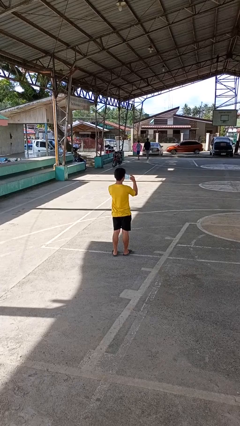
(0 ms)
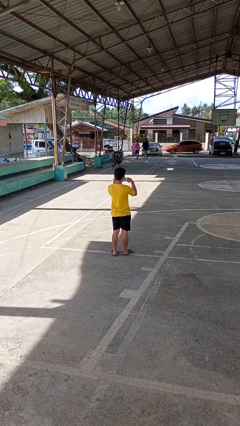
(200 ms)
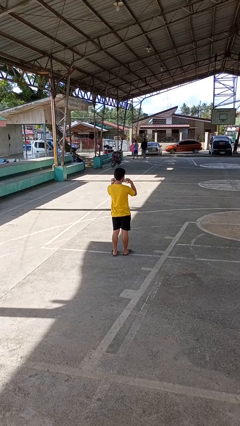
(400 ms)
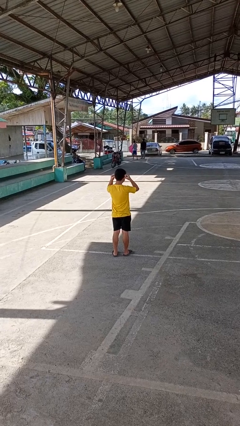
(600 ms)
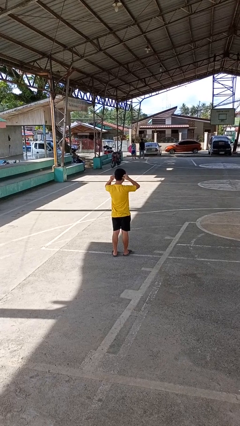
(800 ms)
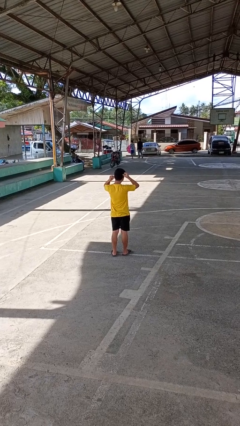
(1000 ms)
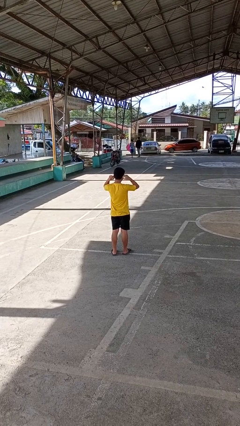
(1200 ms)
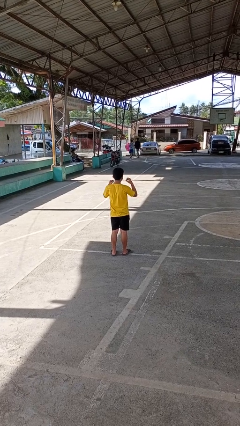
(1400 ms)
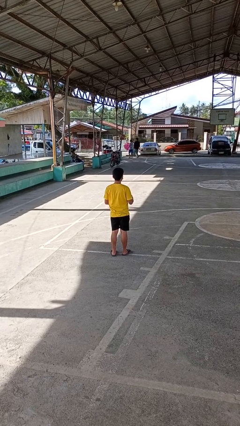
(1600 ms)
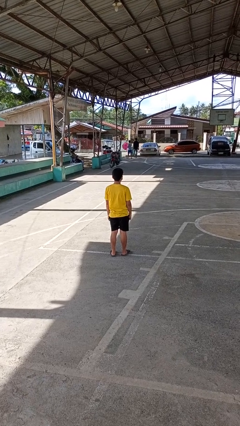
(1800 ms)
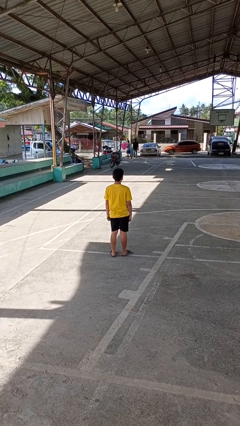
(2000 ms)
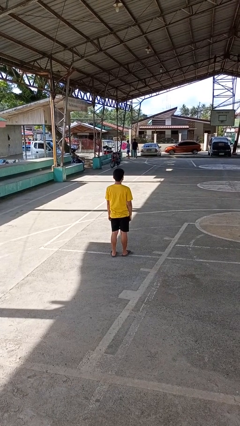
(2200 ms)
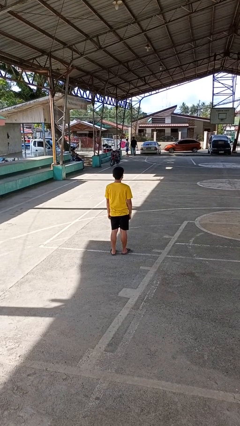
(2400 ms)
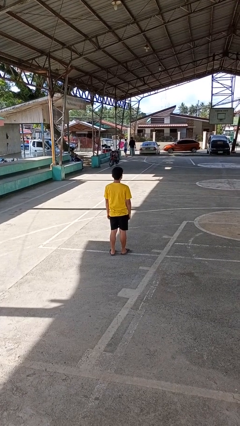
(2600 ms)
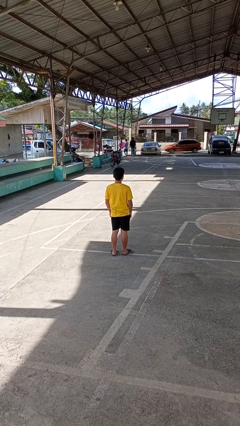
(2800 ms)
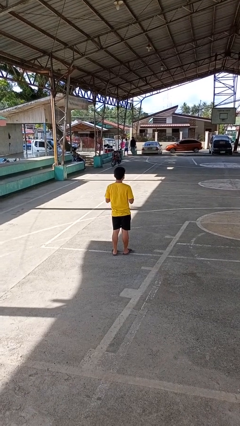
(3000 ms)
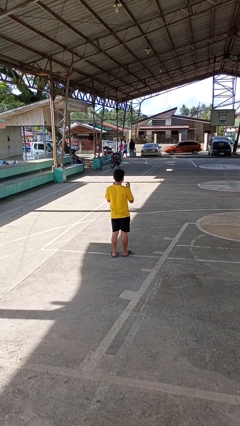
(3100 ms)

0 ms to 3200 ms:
person puts on facemask

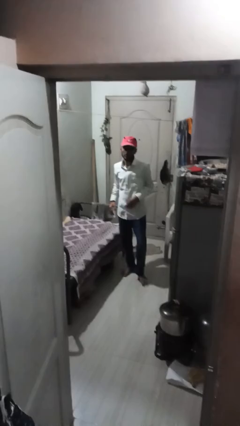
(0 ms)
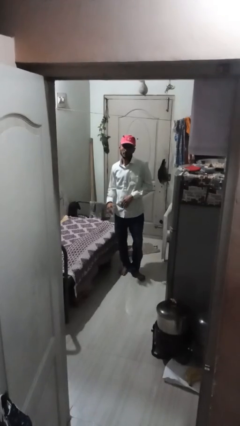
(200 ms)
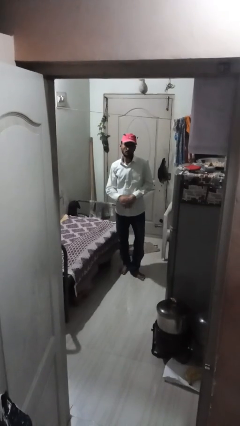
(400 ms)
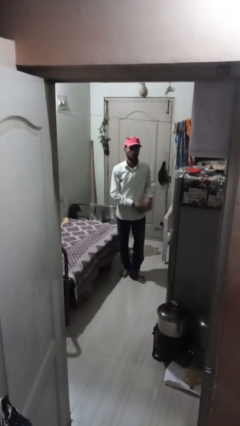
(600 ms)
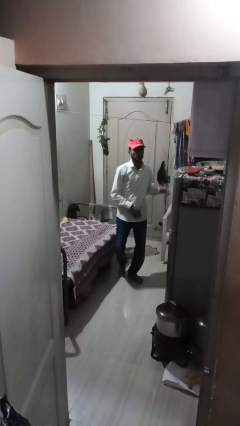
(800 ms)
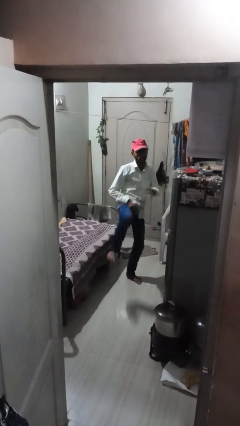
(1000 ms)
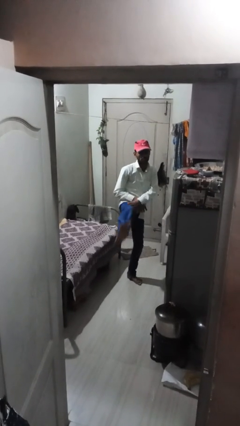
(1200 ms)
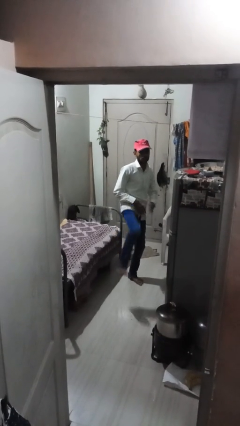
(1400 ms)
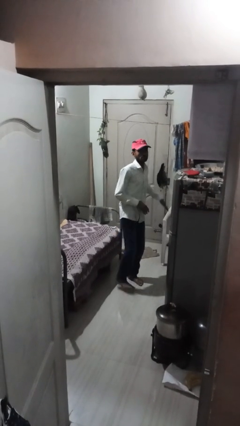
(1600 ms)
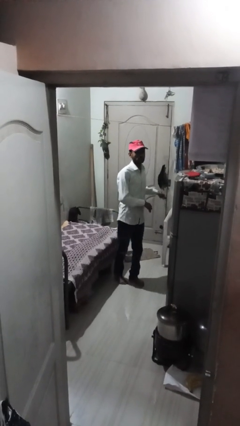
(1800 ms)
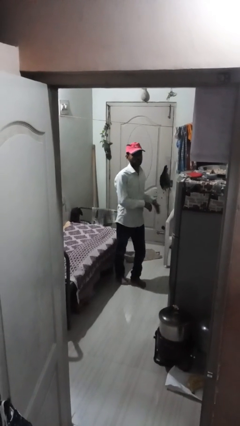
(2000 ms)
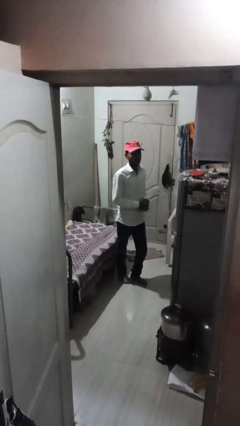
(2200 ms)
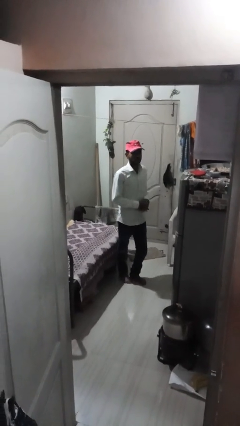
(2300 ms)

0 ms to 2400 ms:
person karate kicks

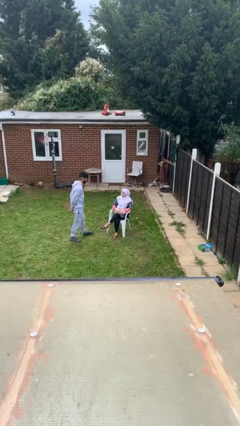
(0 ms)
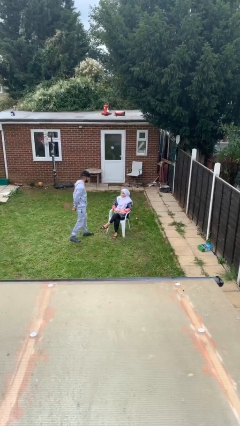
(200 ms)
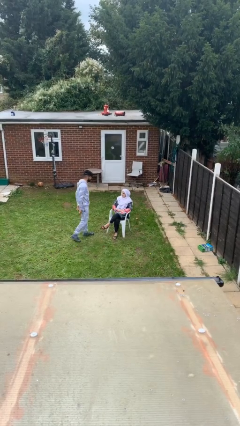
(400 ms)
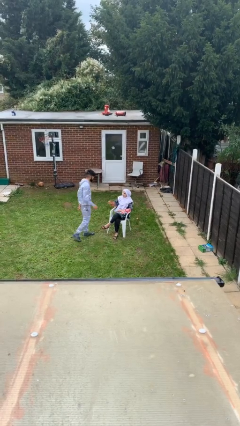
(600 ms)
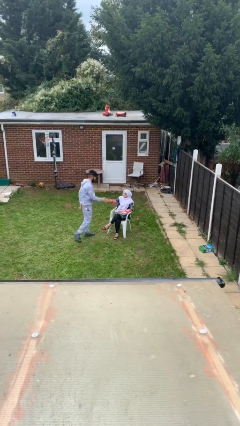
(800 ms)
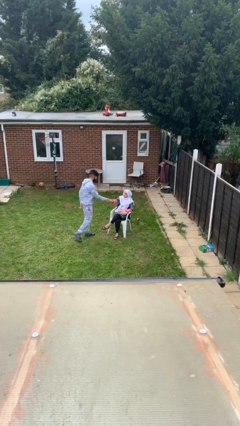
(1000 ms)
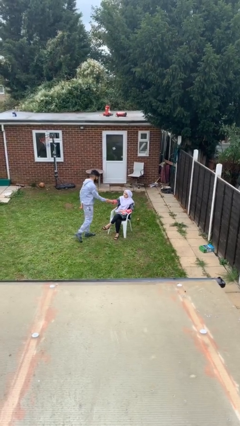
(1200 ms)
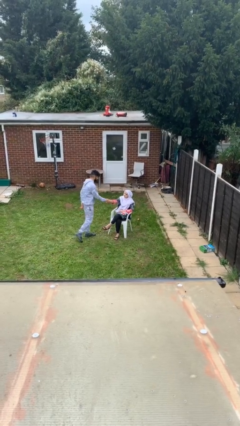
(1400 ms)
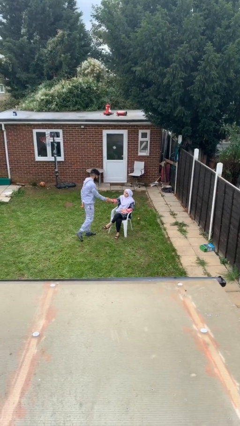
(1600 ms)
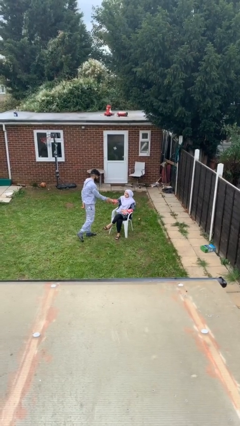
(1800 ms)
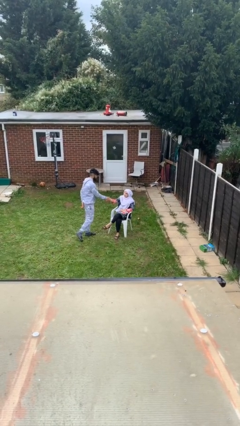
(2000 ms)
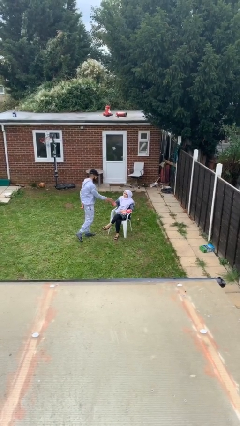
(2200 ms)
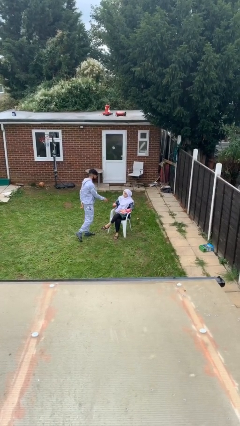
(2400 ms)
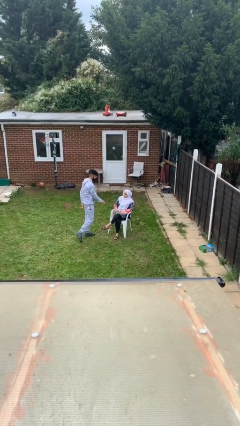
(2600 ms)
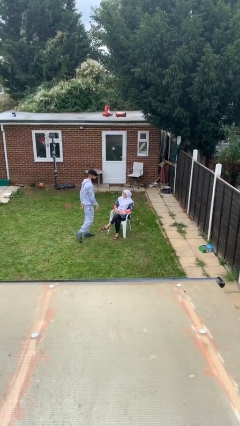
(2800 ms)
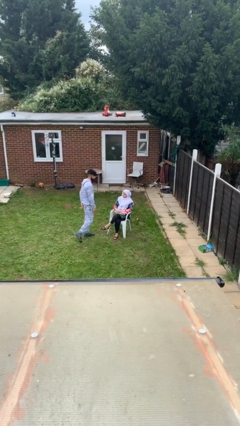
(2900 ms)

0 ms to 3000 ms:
person shakes hand

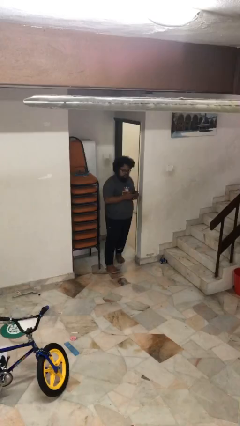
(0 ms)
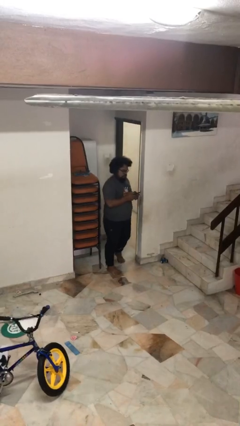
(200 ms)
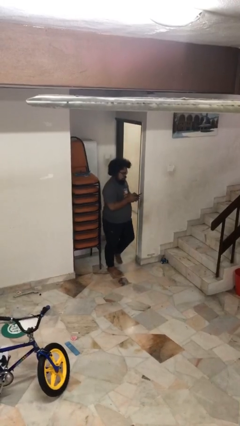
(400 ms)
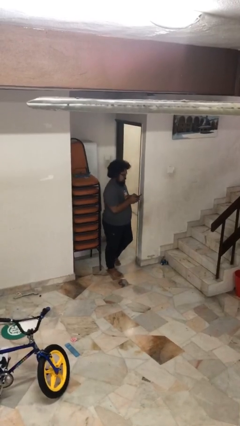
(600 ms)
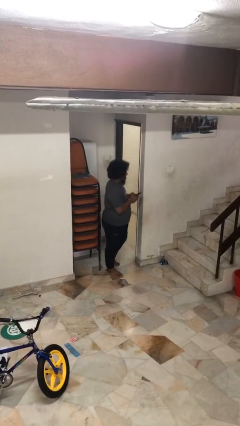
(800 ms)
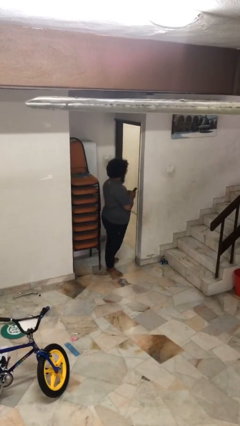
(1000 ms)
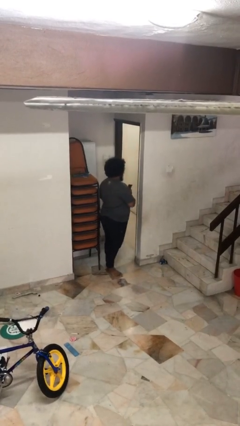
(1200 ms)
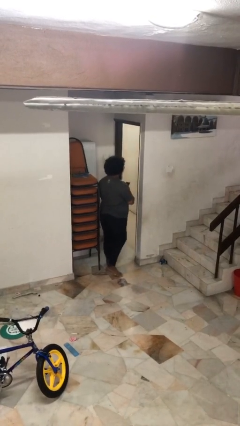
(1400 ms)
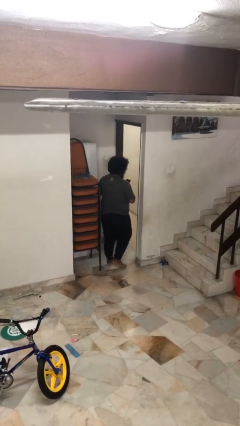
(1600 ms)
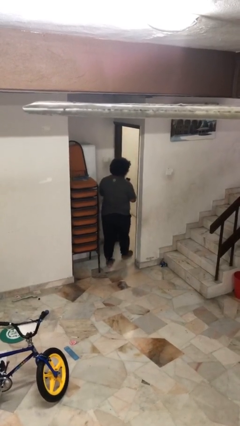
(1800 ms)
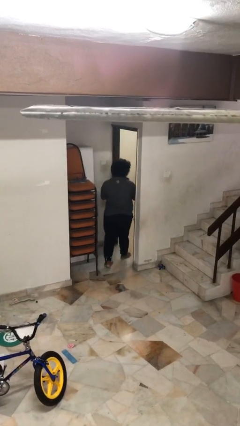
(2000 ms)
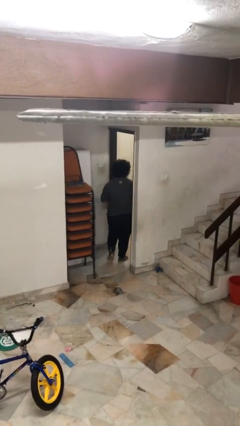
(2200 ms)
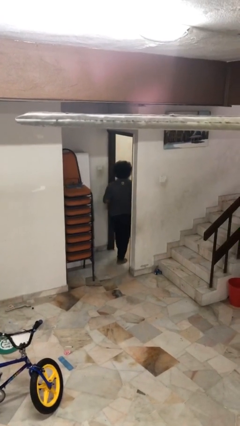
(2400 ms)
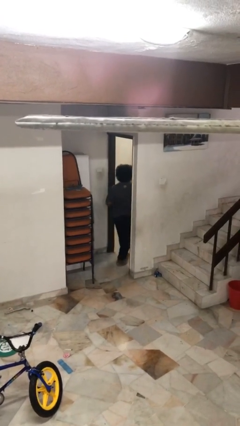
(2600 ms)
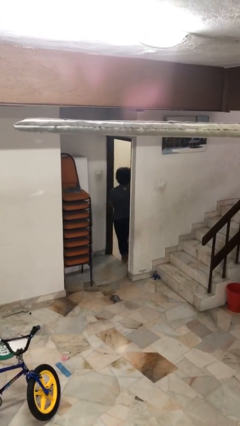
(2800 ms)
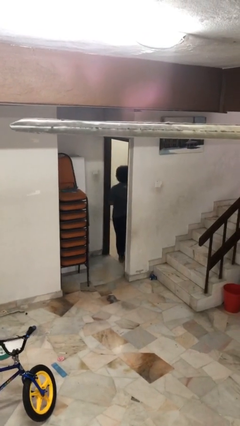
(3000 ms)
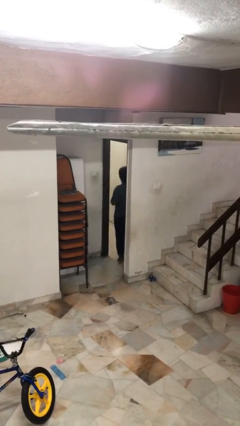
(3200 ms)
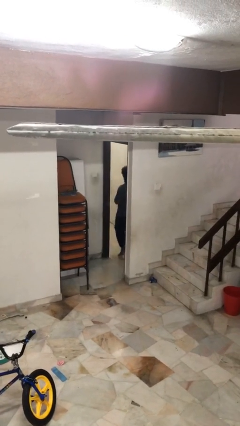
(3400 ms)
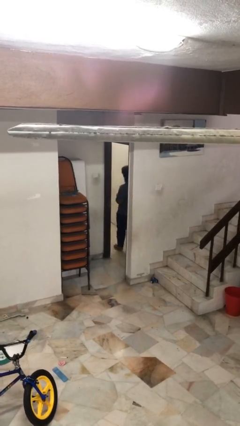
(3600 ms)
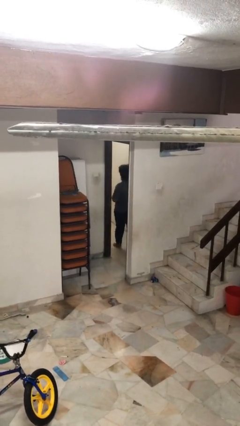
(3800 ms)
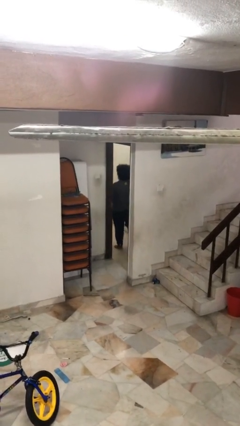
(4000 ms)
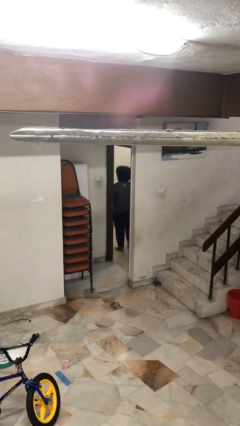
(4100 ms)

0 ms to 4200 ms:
person exits scene through structure

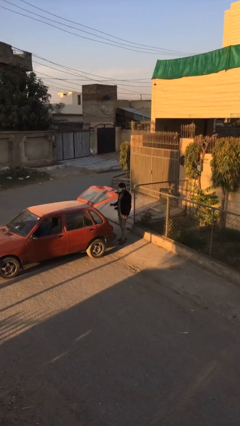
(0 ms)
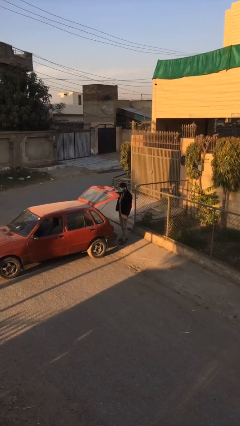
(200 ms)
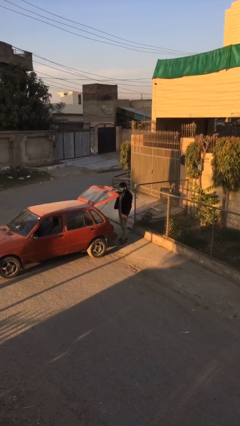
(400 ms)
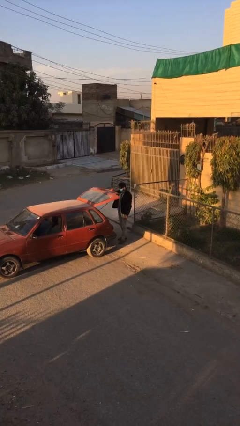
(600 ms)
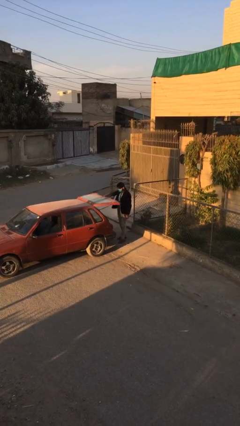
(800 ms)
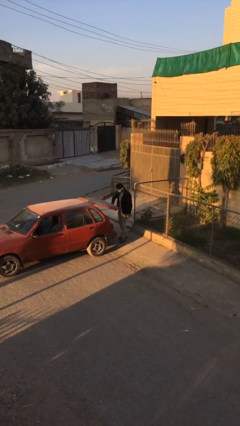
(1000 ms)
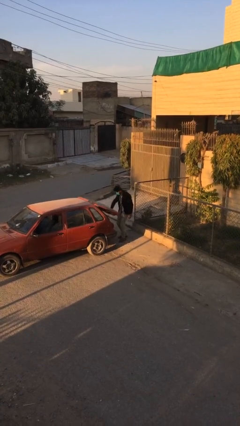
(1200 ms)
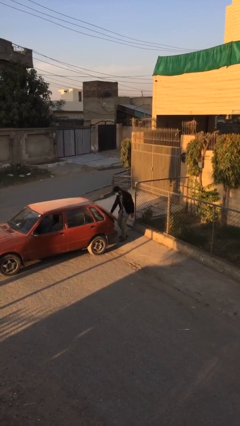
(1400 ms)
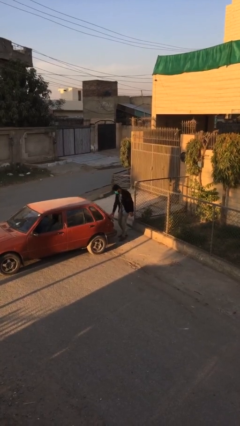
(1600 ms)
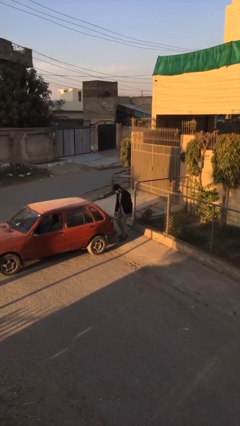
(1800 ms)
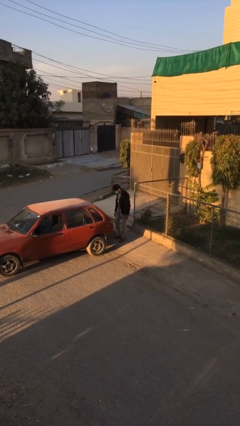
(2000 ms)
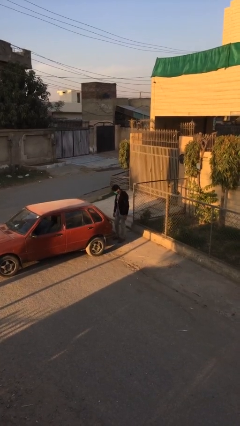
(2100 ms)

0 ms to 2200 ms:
person closes car trunk

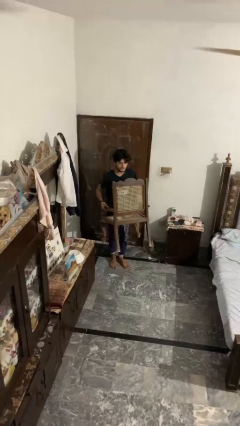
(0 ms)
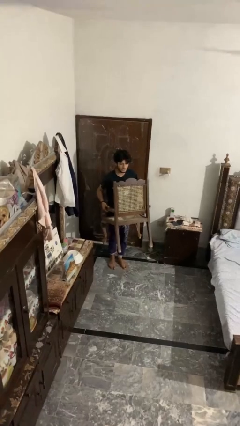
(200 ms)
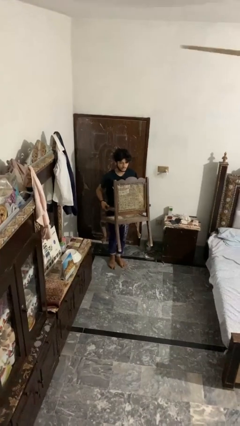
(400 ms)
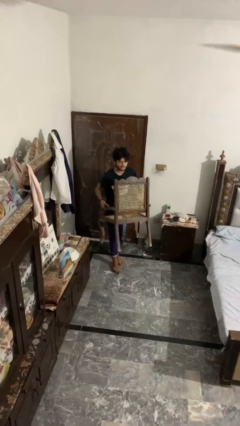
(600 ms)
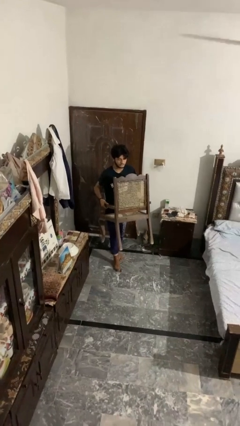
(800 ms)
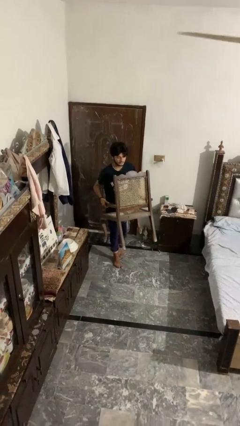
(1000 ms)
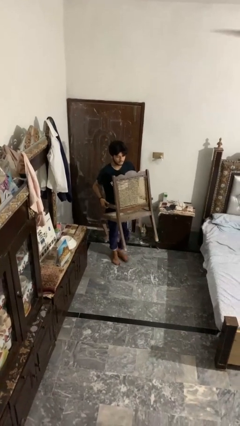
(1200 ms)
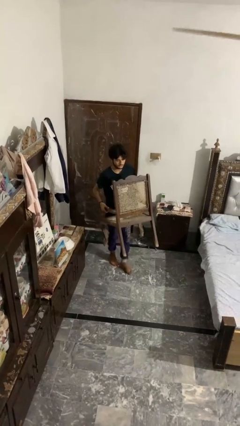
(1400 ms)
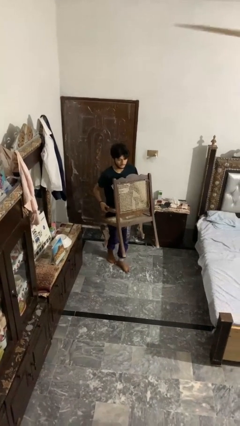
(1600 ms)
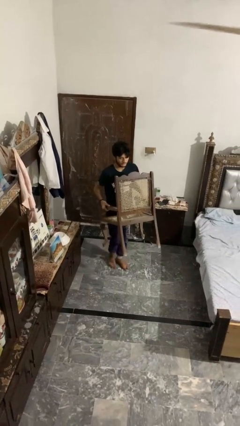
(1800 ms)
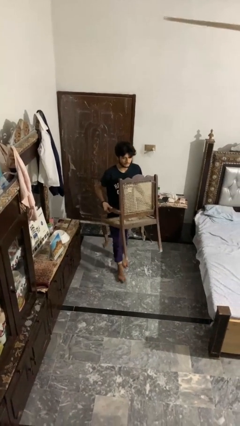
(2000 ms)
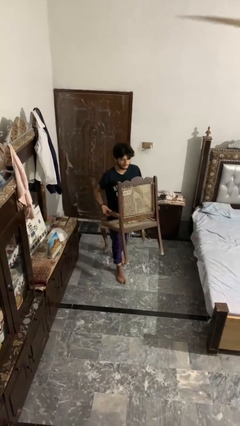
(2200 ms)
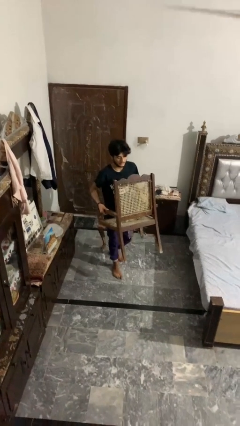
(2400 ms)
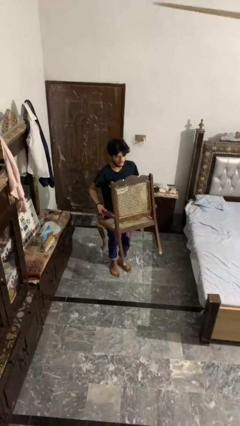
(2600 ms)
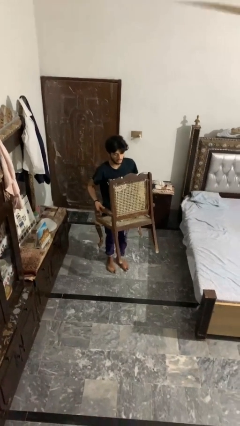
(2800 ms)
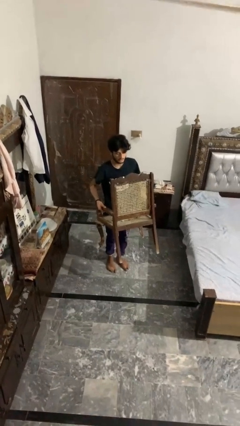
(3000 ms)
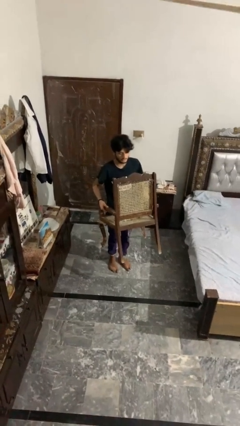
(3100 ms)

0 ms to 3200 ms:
person carries furniture
